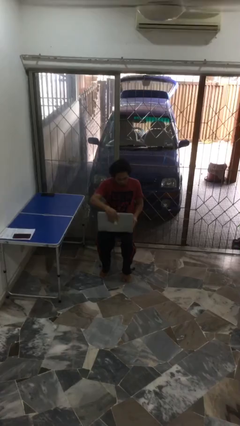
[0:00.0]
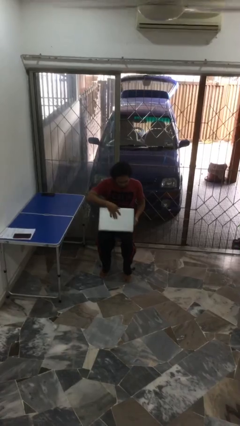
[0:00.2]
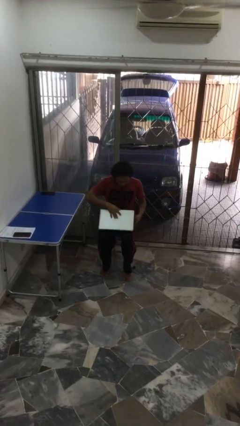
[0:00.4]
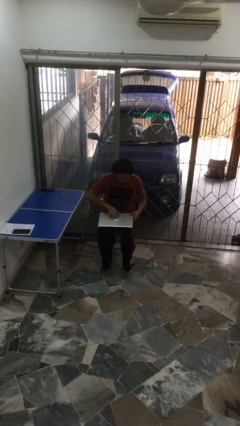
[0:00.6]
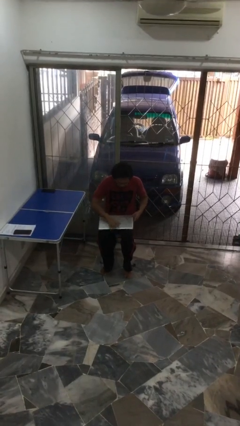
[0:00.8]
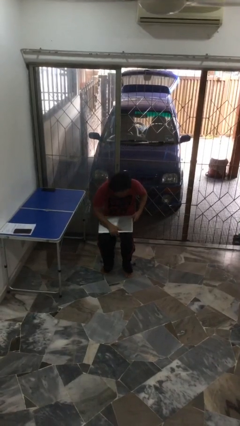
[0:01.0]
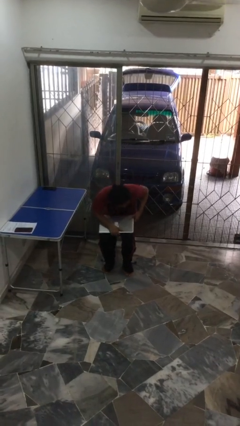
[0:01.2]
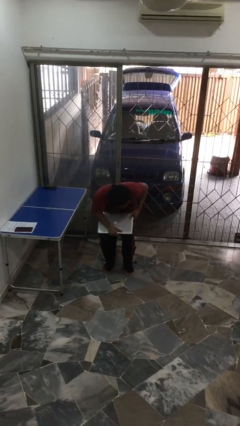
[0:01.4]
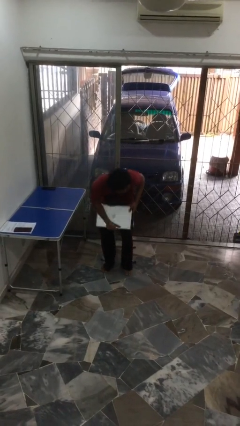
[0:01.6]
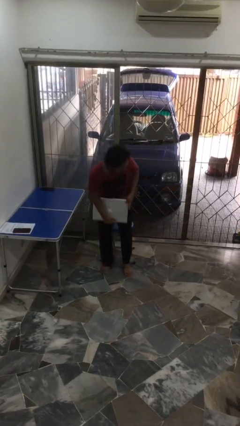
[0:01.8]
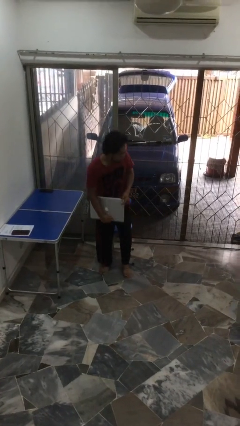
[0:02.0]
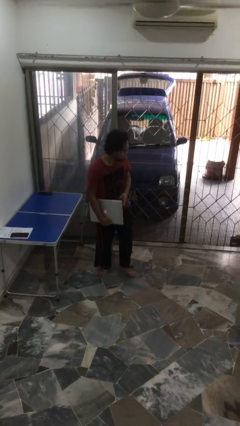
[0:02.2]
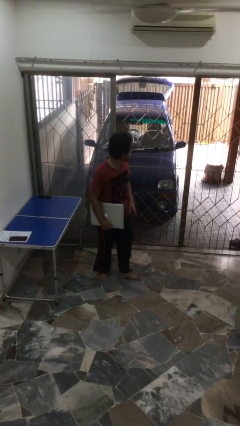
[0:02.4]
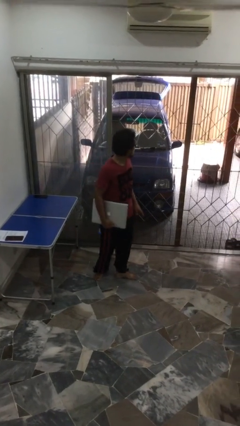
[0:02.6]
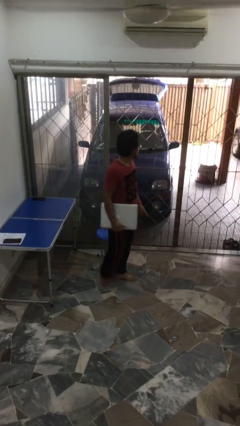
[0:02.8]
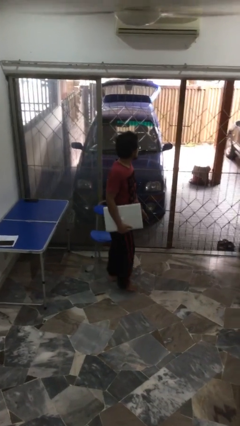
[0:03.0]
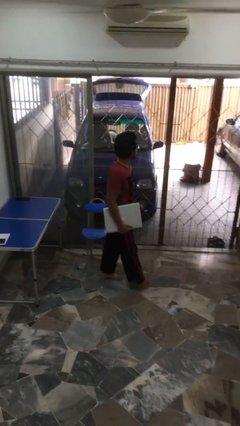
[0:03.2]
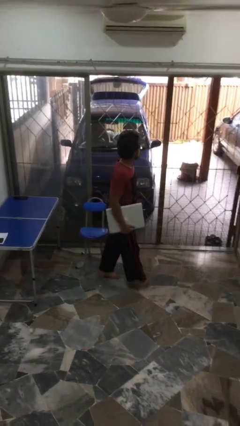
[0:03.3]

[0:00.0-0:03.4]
person stands up

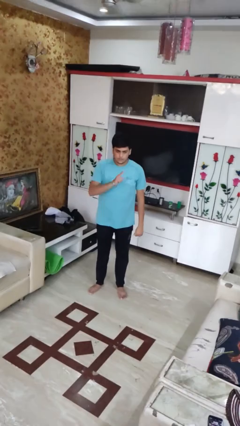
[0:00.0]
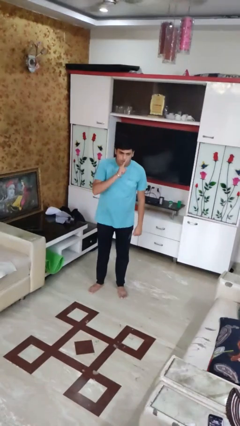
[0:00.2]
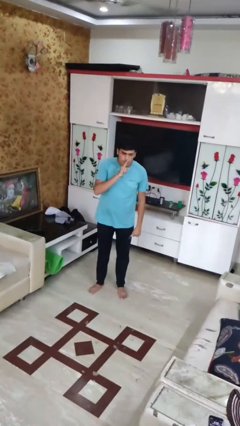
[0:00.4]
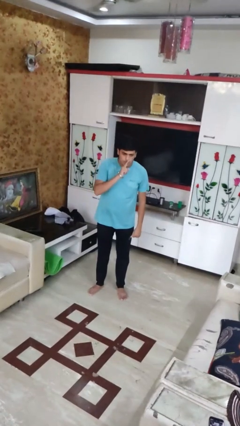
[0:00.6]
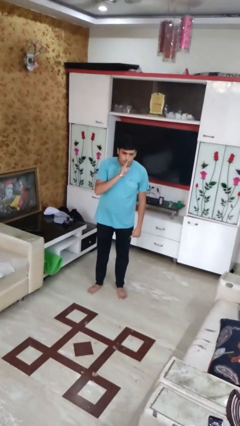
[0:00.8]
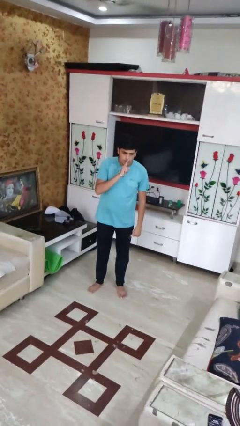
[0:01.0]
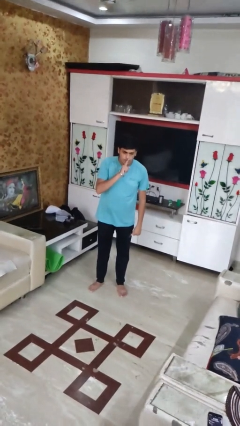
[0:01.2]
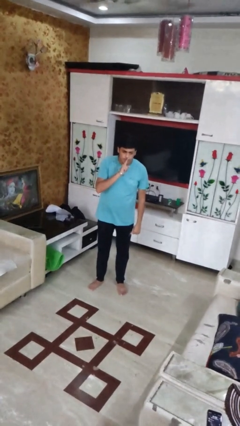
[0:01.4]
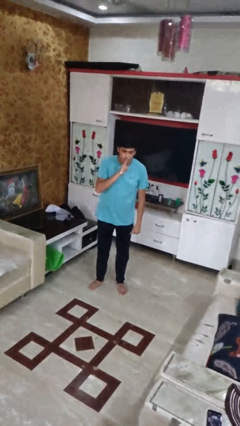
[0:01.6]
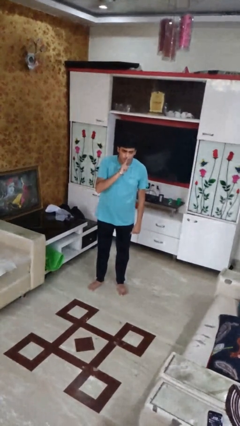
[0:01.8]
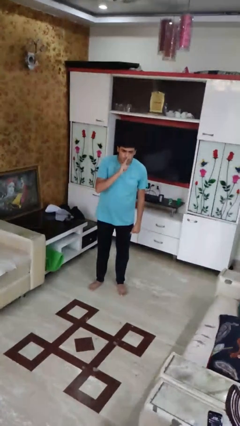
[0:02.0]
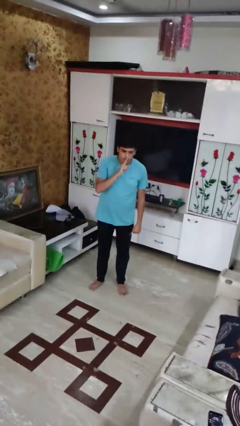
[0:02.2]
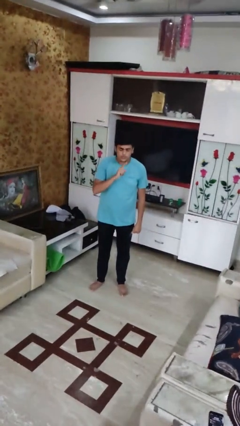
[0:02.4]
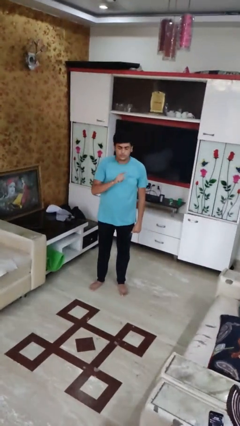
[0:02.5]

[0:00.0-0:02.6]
person gestures be quiet

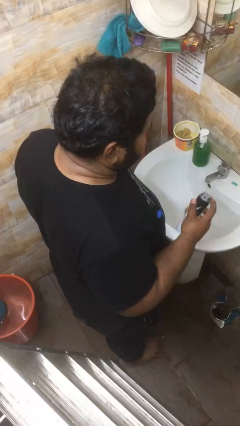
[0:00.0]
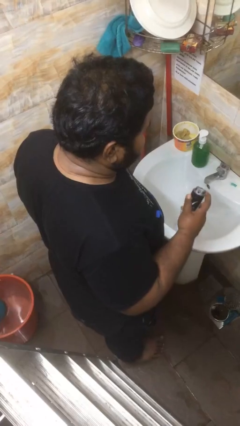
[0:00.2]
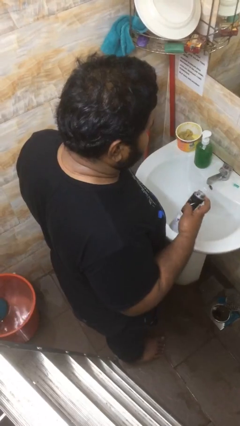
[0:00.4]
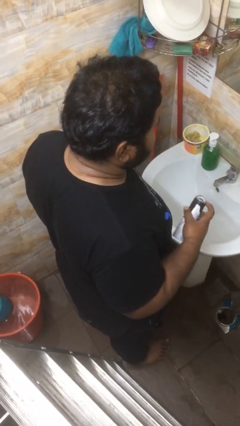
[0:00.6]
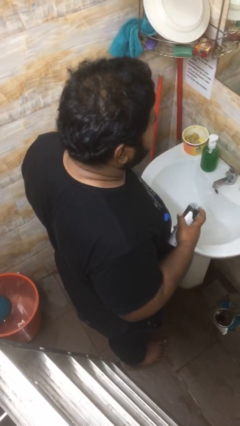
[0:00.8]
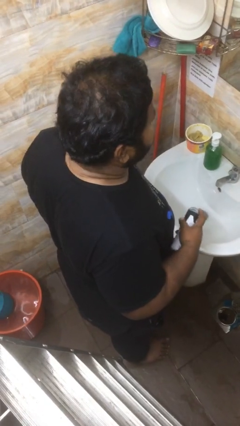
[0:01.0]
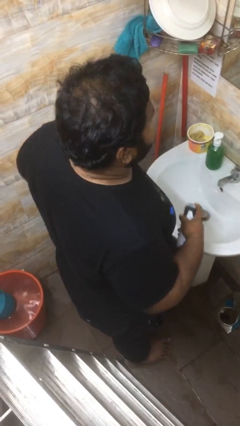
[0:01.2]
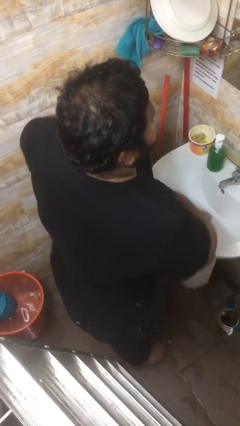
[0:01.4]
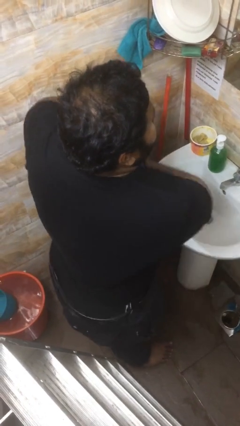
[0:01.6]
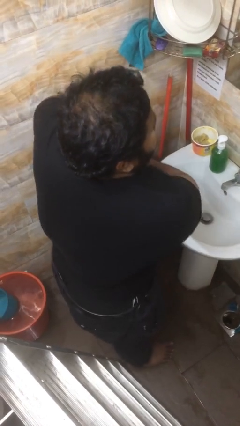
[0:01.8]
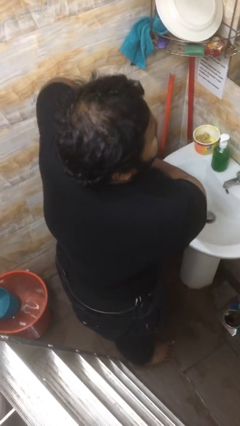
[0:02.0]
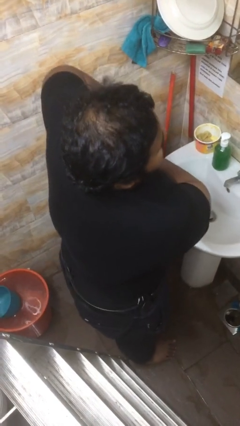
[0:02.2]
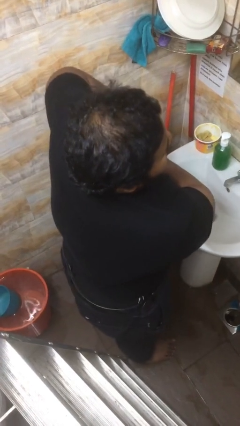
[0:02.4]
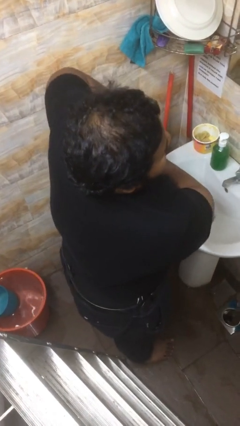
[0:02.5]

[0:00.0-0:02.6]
person applies deodorant

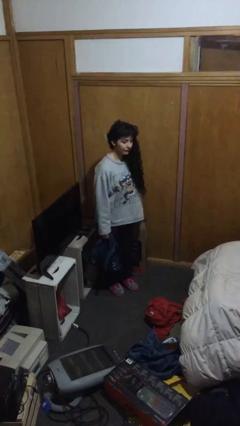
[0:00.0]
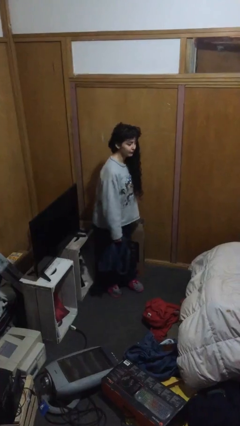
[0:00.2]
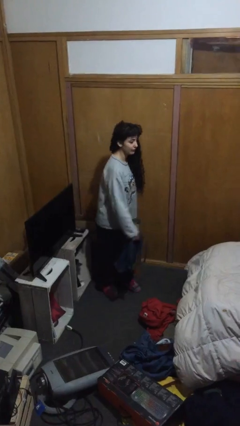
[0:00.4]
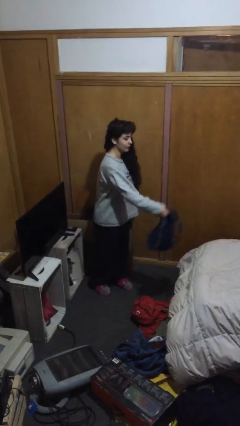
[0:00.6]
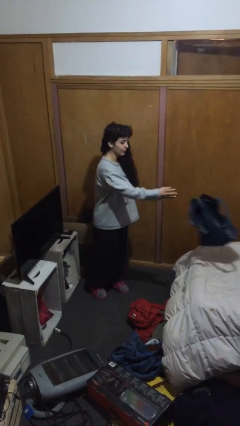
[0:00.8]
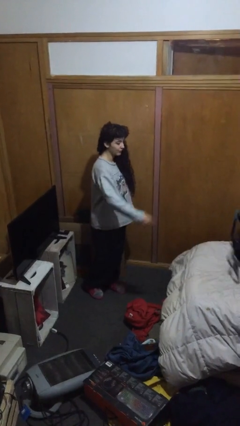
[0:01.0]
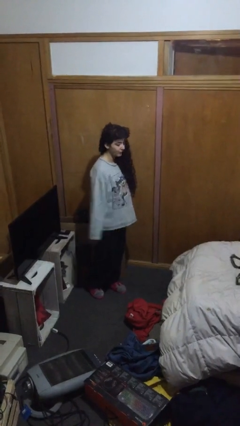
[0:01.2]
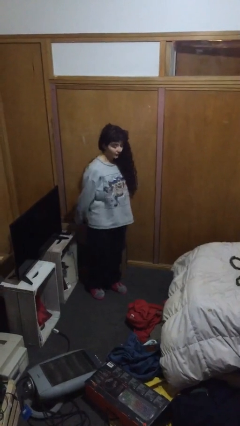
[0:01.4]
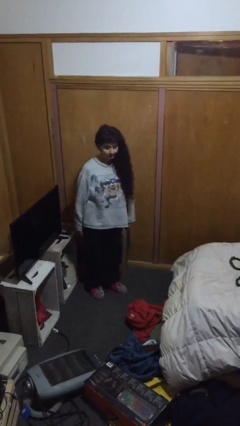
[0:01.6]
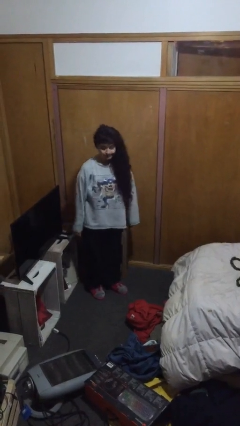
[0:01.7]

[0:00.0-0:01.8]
person throws object on bed

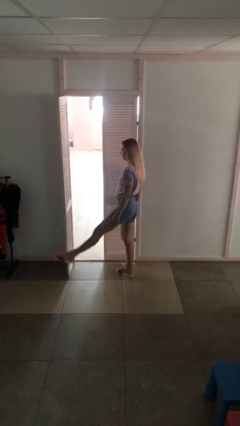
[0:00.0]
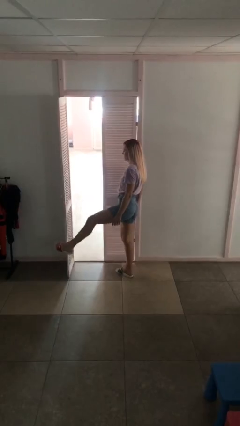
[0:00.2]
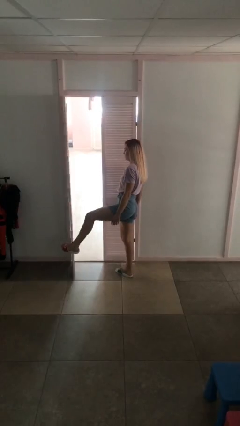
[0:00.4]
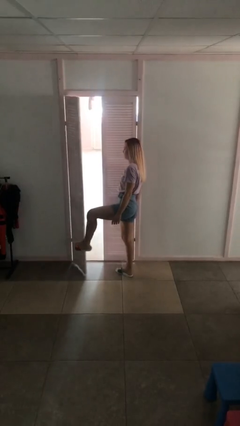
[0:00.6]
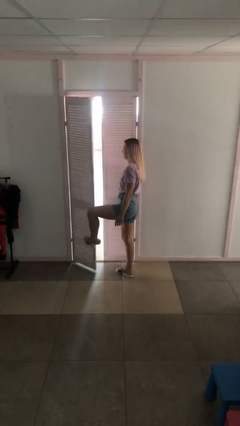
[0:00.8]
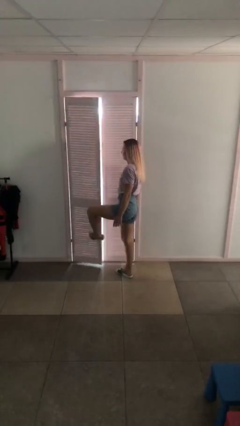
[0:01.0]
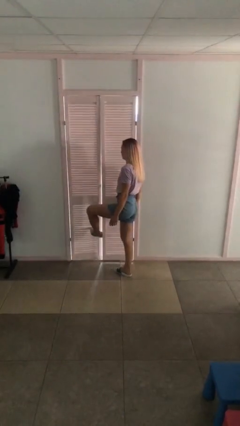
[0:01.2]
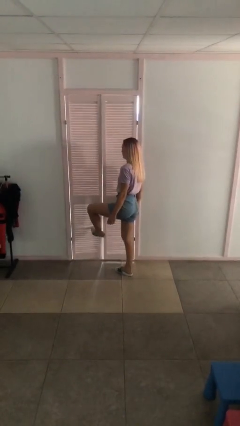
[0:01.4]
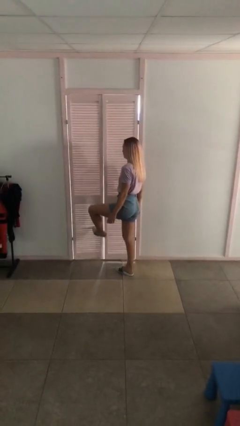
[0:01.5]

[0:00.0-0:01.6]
person closes door with foot

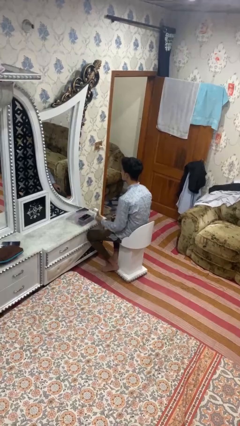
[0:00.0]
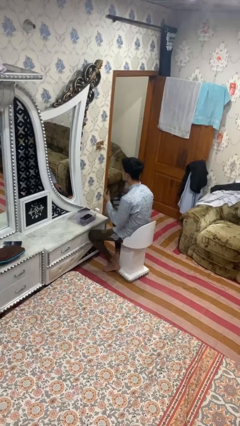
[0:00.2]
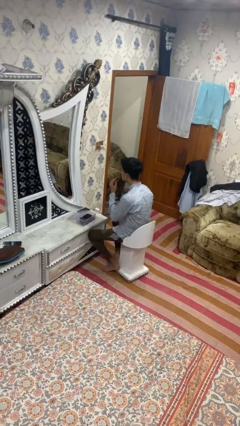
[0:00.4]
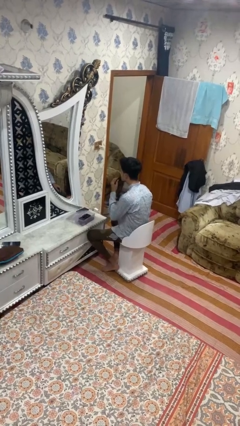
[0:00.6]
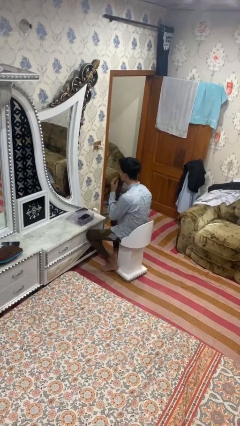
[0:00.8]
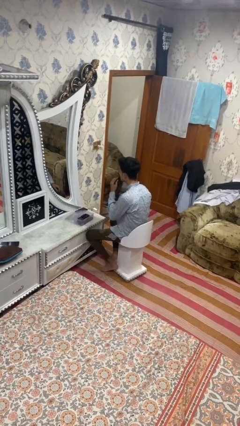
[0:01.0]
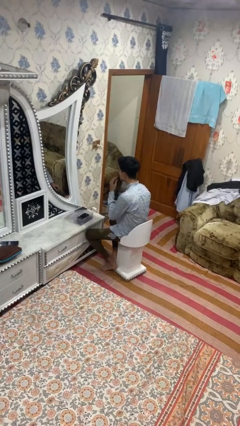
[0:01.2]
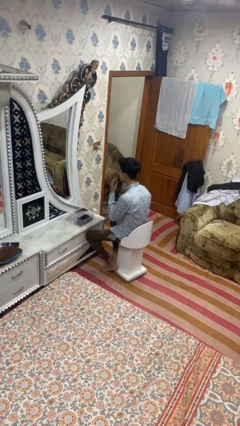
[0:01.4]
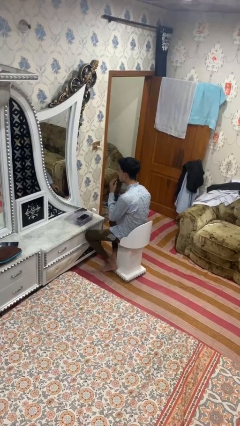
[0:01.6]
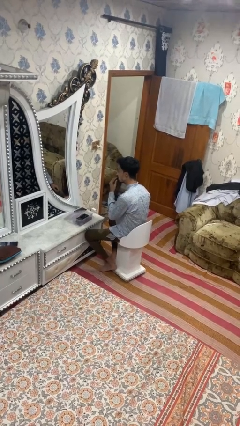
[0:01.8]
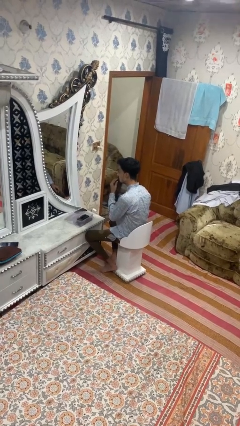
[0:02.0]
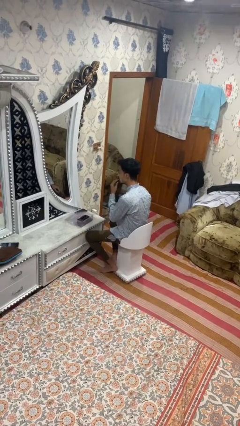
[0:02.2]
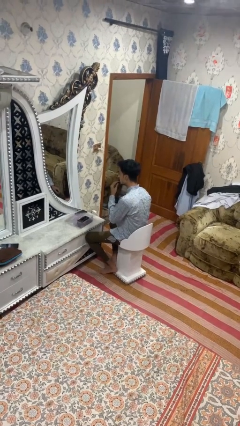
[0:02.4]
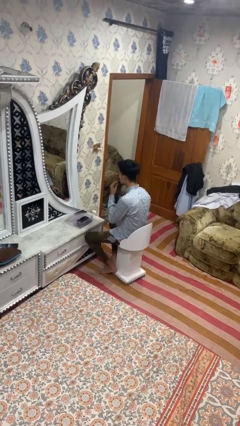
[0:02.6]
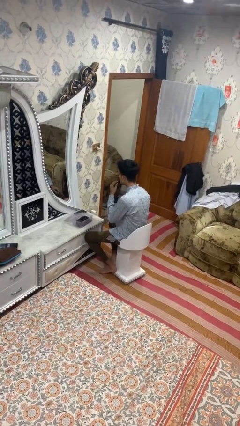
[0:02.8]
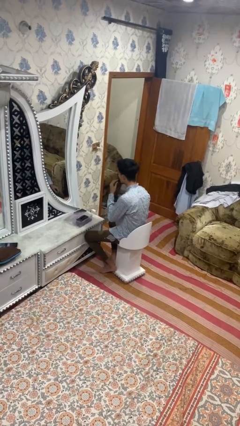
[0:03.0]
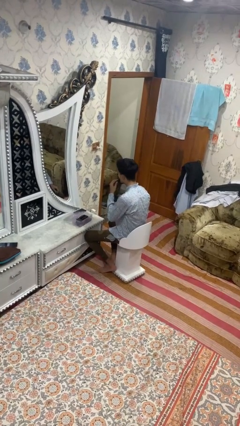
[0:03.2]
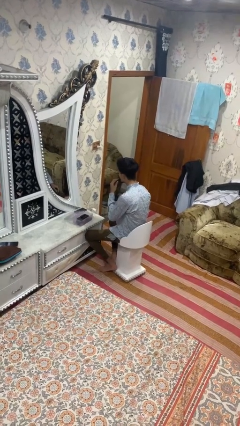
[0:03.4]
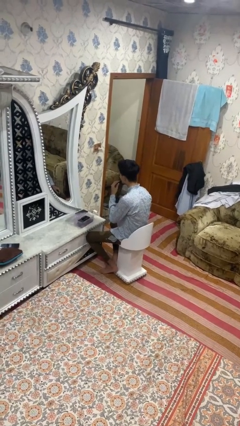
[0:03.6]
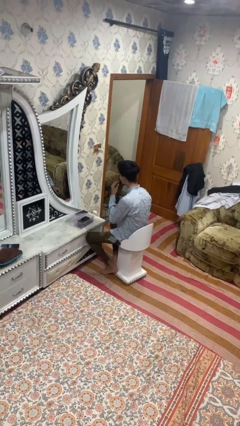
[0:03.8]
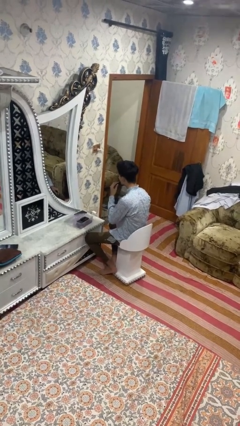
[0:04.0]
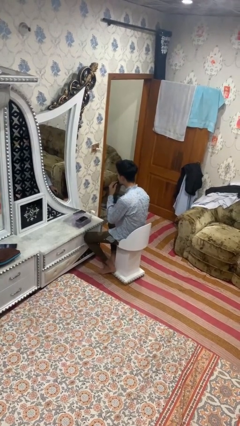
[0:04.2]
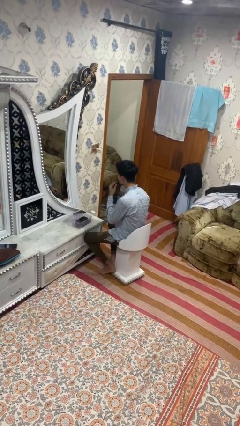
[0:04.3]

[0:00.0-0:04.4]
person applies lip makeup

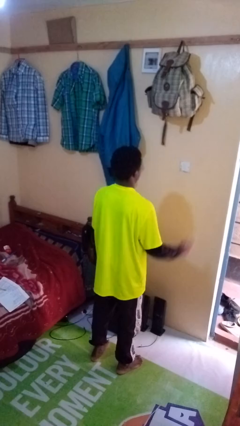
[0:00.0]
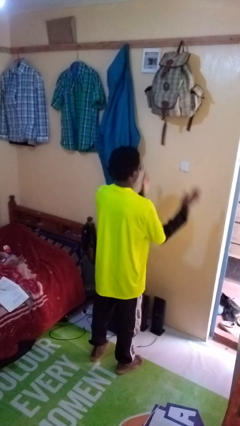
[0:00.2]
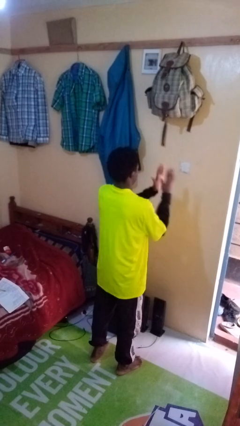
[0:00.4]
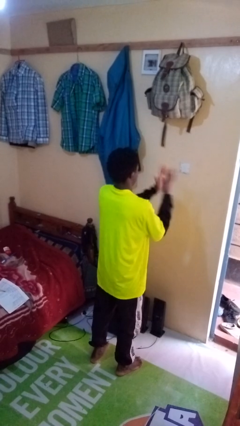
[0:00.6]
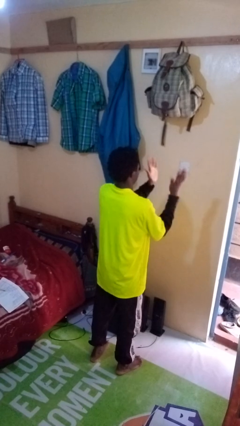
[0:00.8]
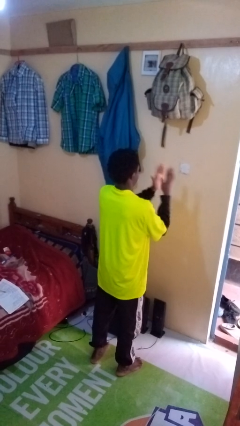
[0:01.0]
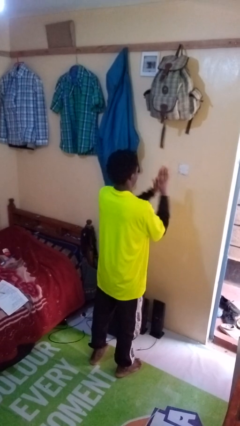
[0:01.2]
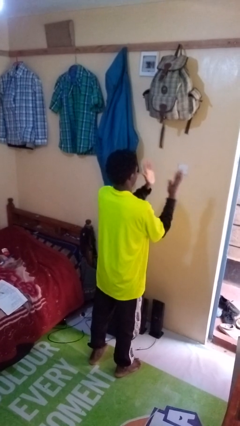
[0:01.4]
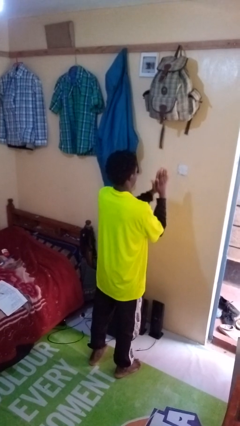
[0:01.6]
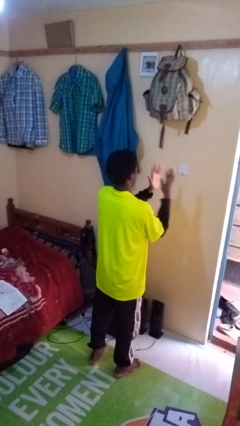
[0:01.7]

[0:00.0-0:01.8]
person claps hands
